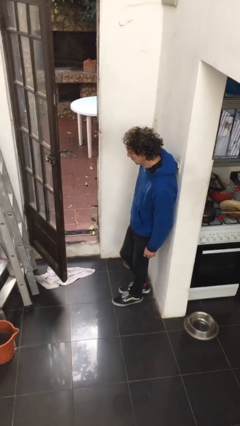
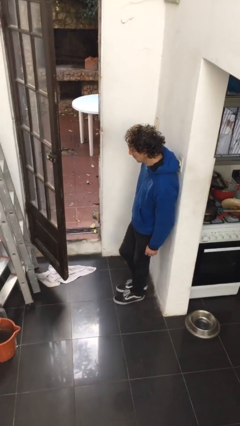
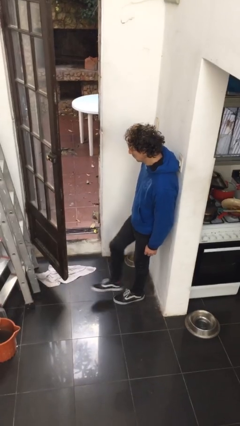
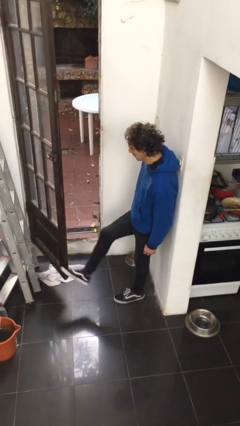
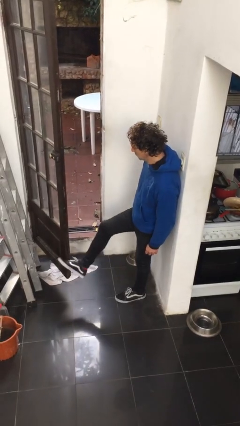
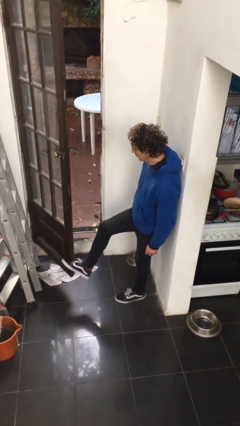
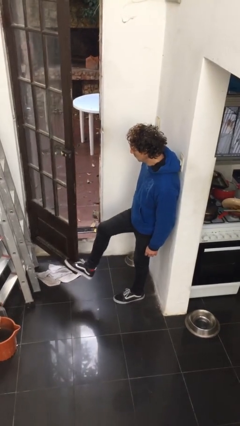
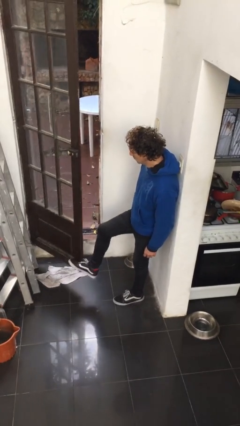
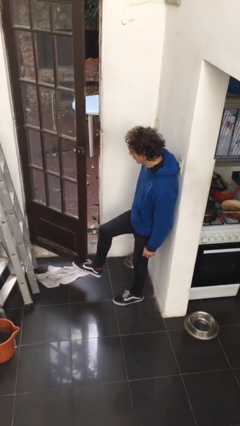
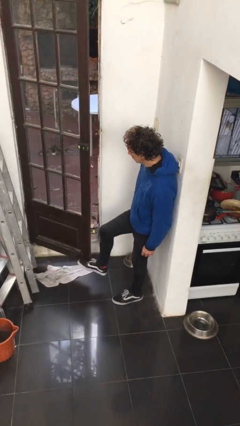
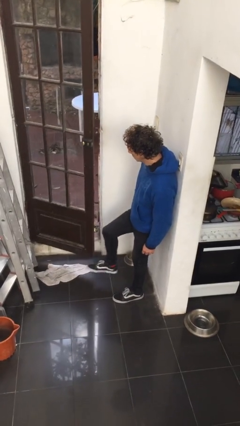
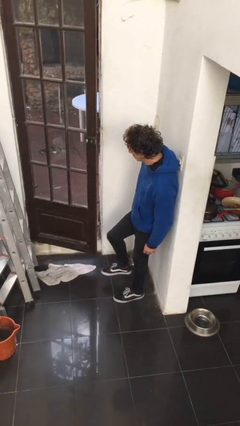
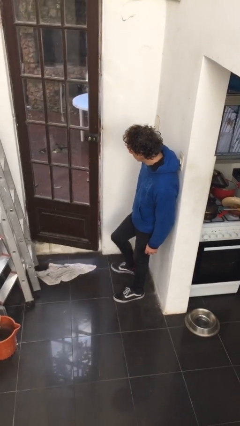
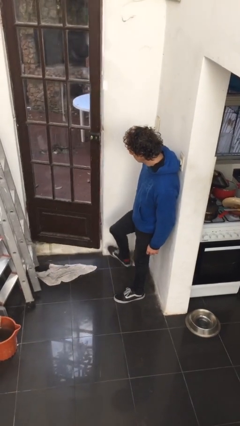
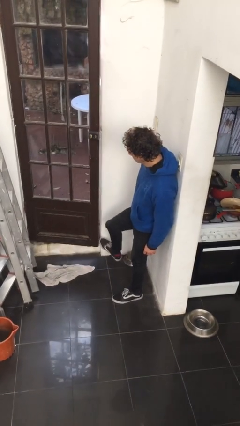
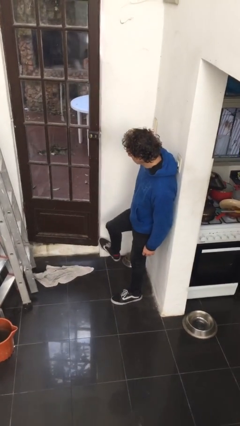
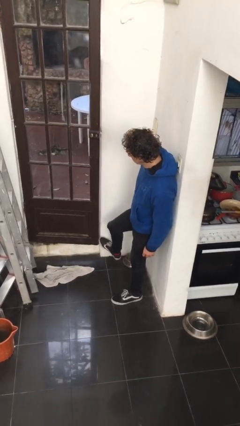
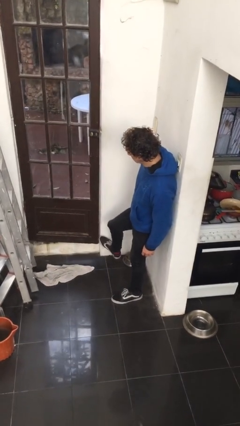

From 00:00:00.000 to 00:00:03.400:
person closes door with foot

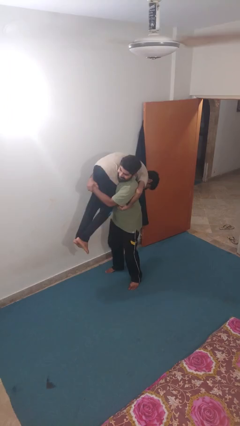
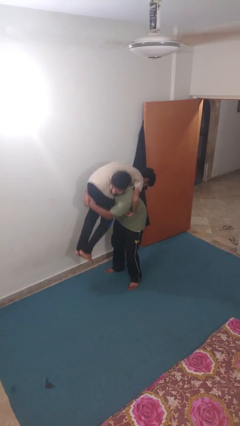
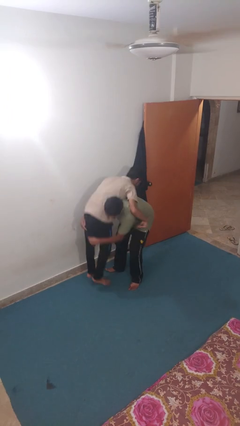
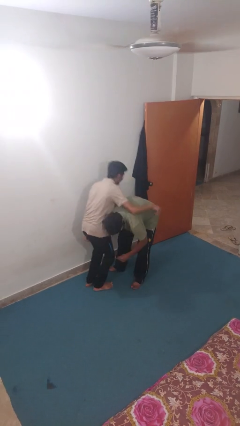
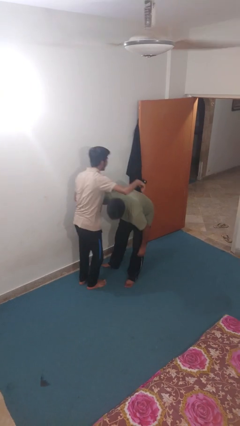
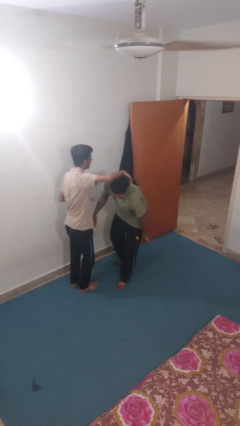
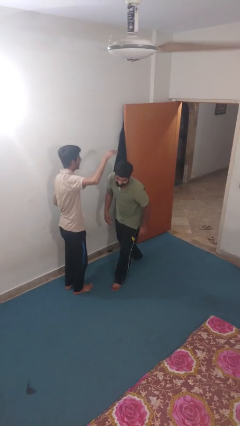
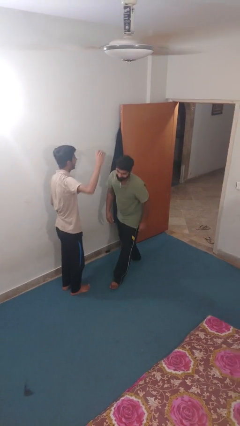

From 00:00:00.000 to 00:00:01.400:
person puts down person

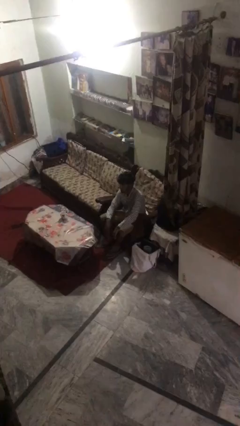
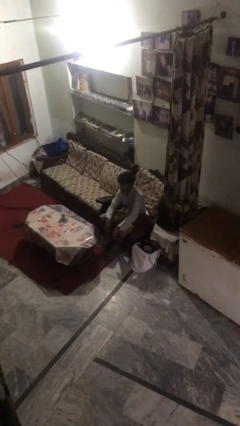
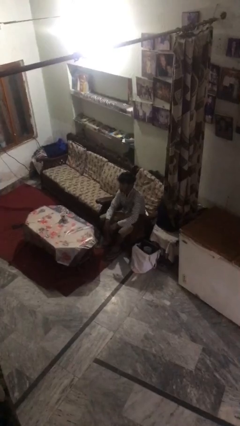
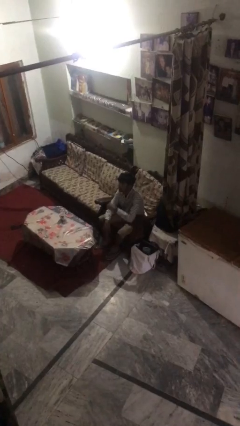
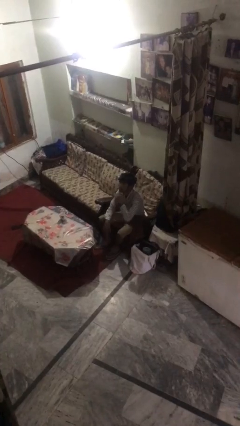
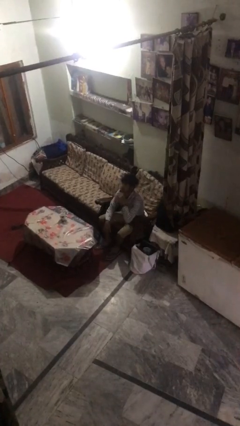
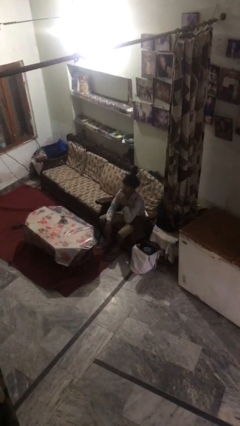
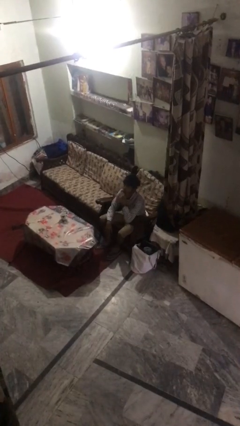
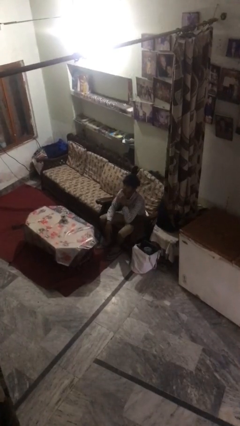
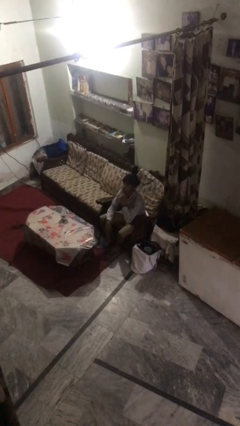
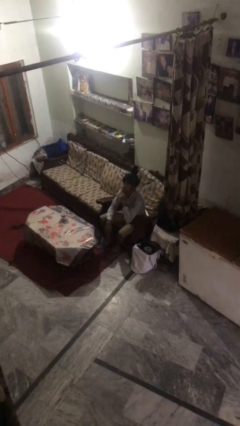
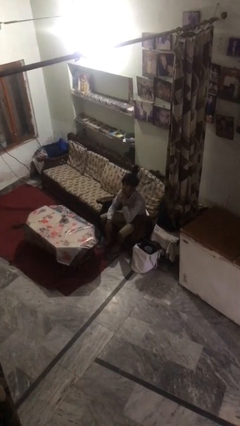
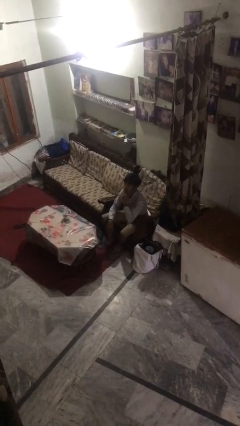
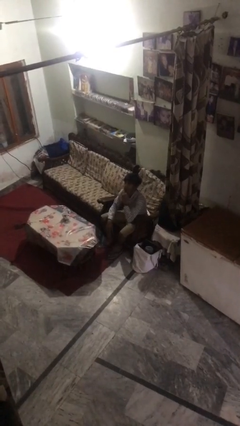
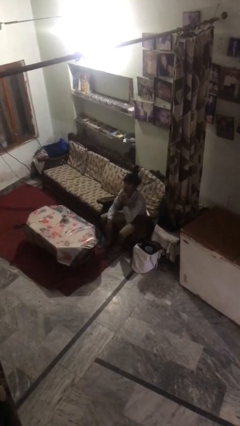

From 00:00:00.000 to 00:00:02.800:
person strokes chin

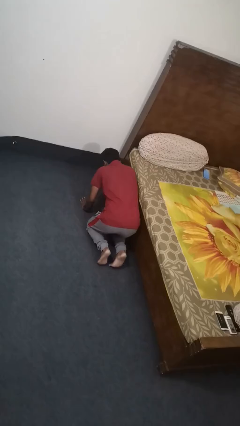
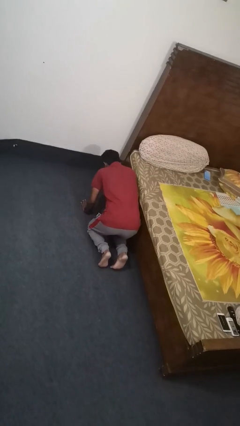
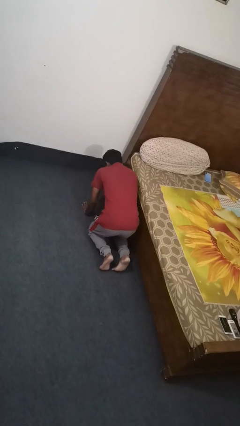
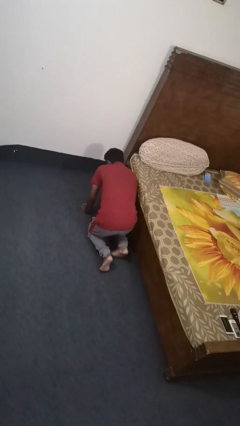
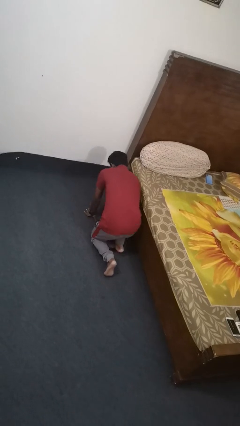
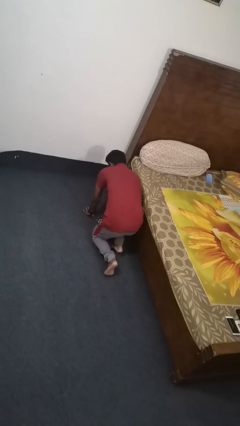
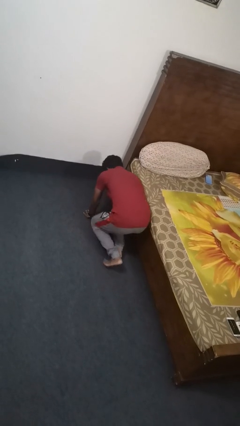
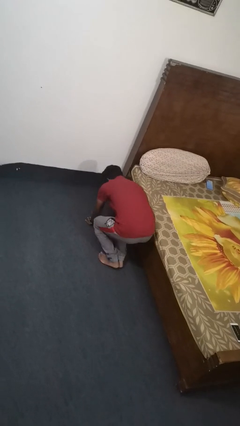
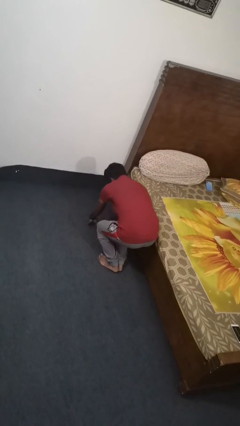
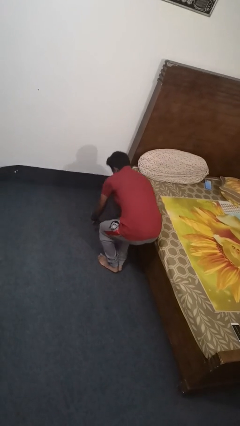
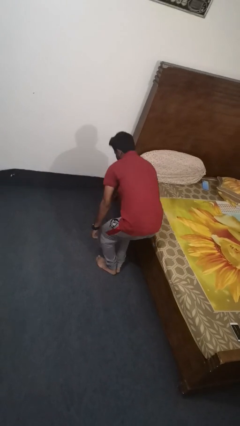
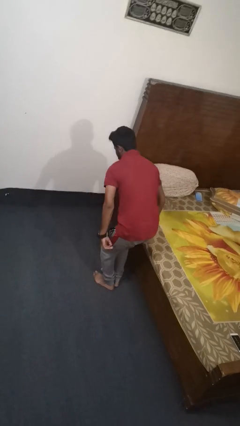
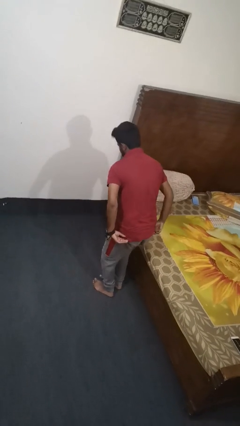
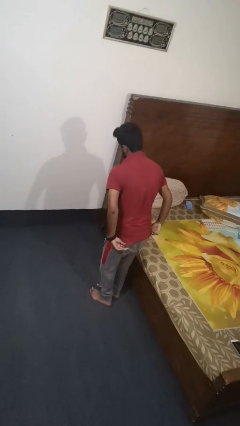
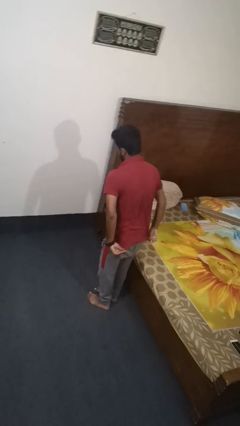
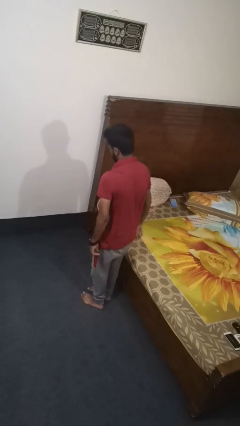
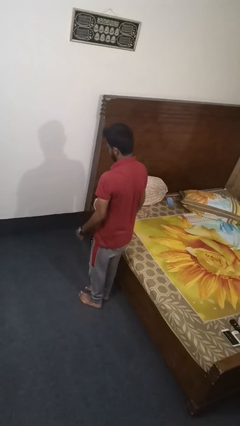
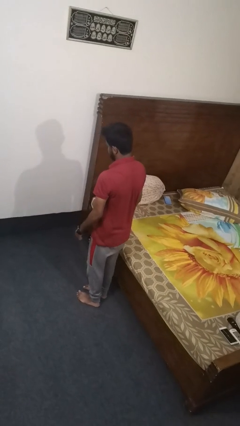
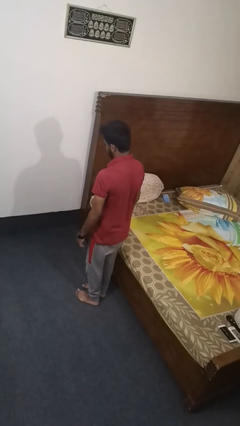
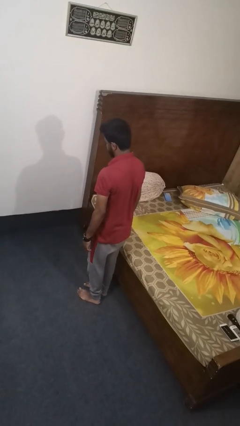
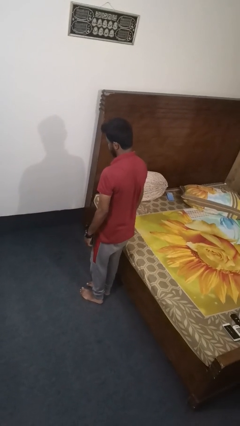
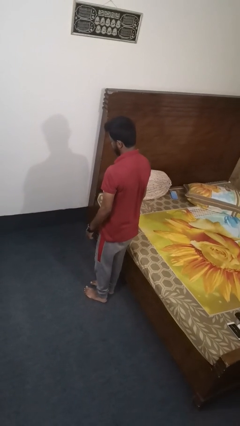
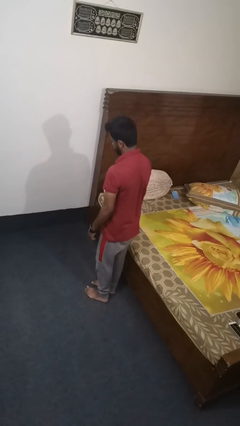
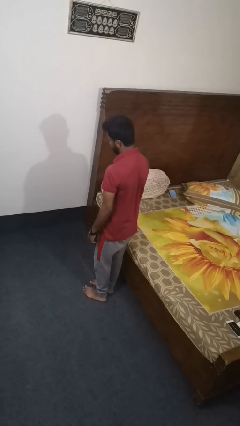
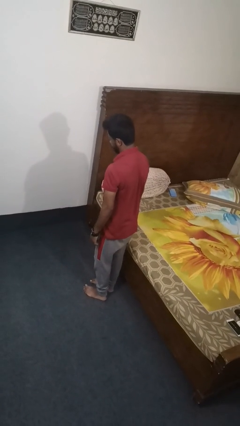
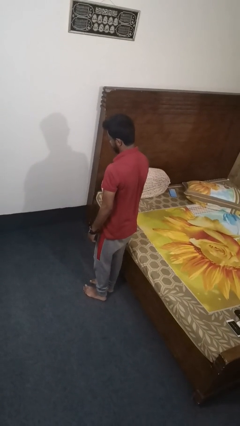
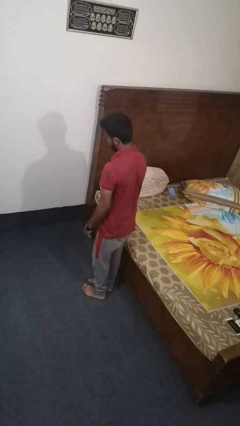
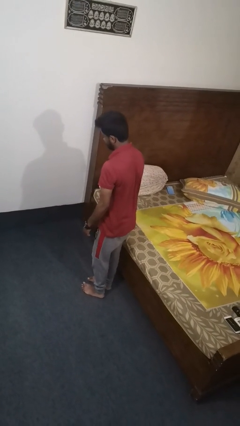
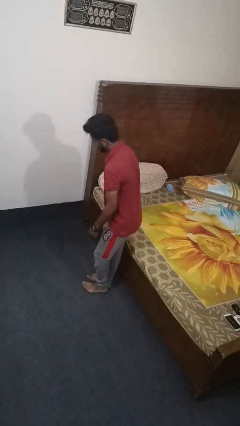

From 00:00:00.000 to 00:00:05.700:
person stands up from floor

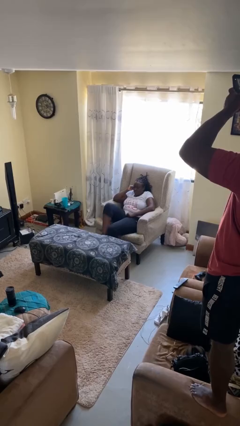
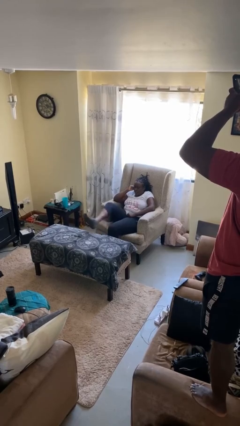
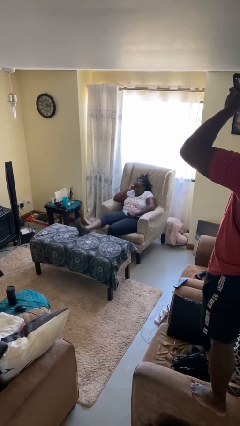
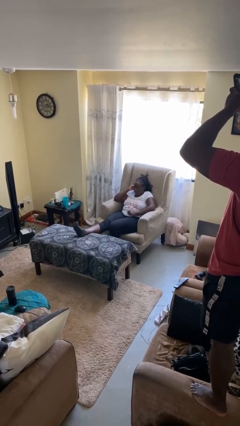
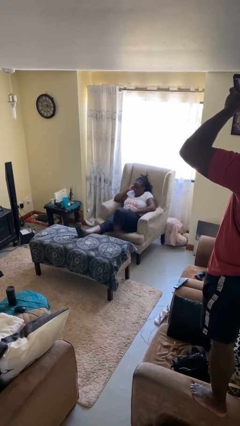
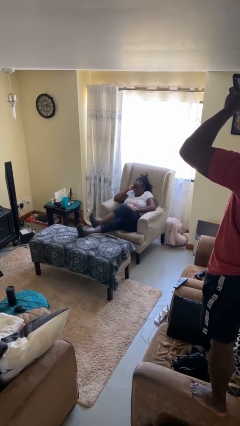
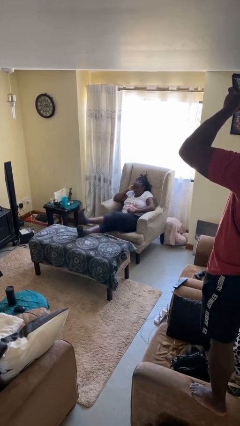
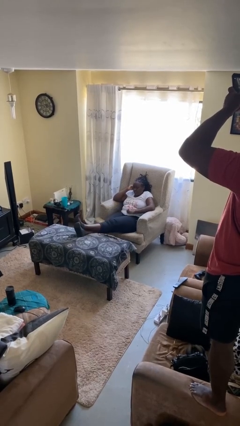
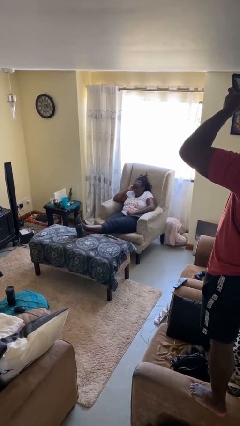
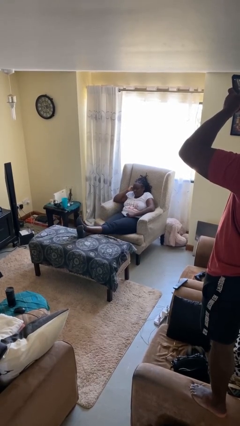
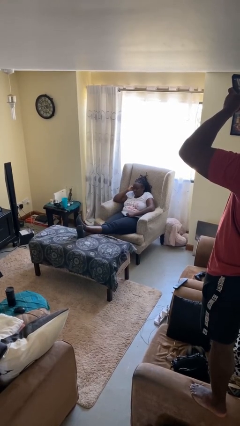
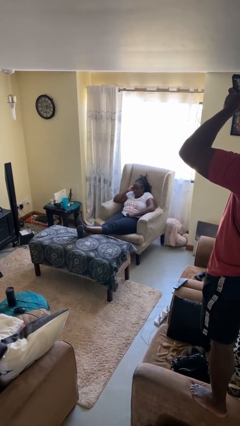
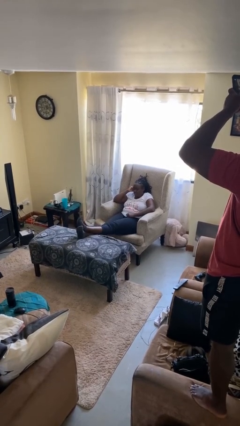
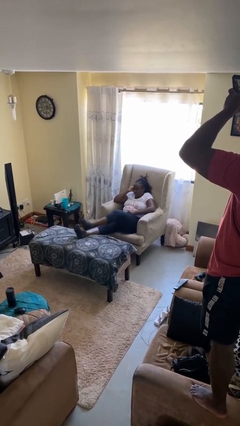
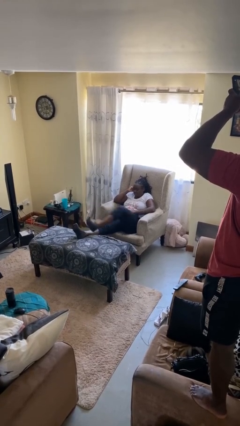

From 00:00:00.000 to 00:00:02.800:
person puts feet up

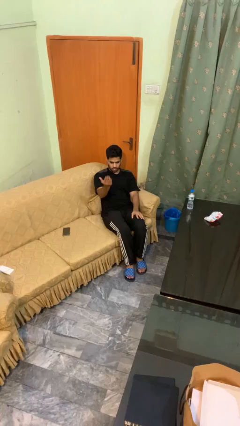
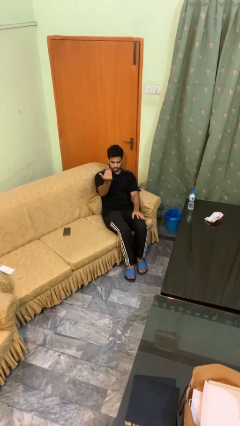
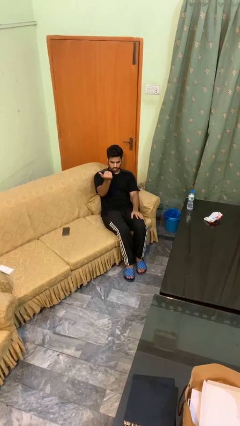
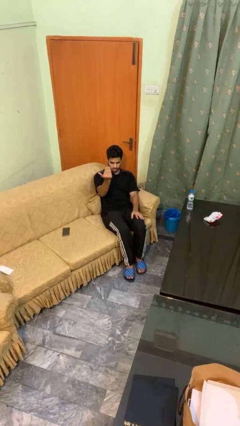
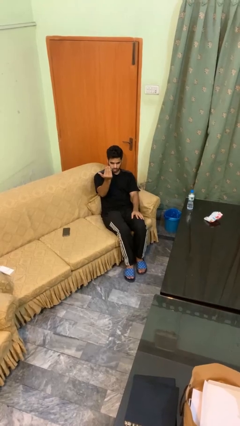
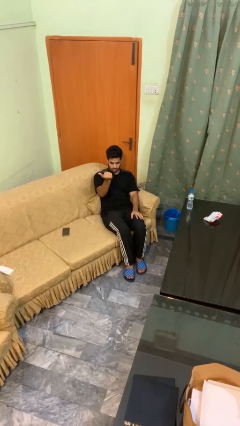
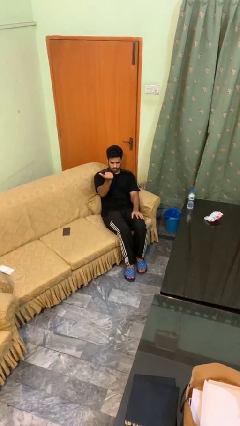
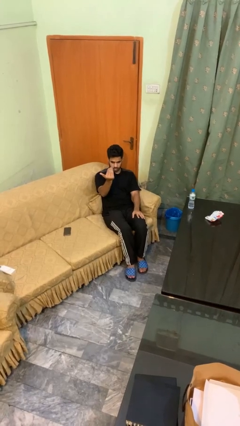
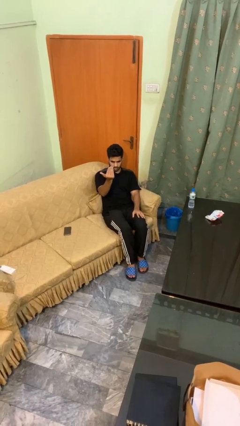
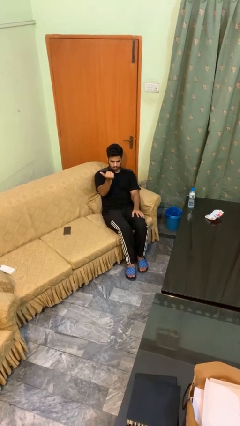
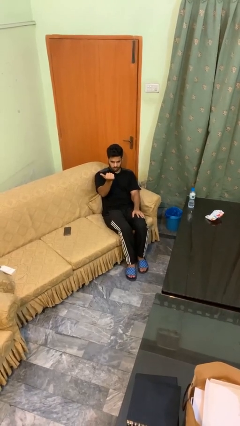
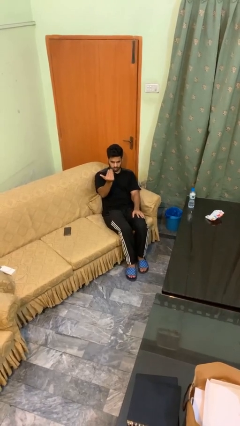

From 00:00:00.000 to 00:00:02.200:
person gestures come here
